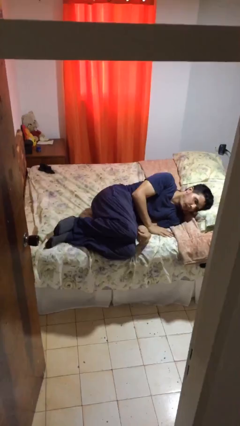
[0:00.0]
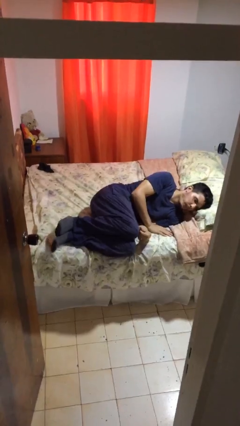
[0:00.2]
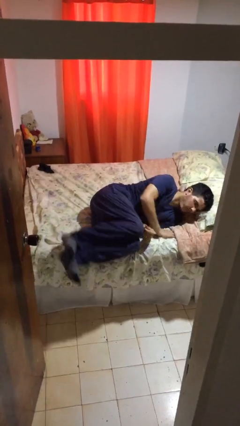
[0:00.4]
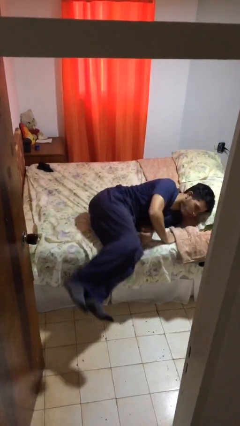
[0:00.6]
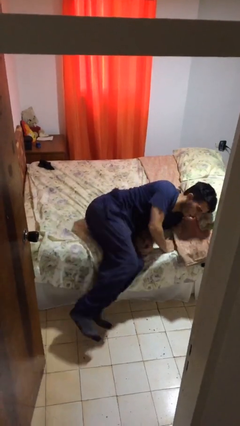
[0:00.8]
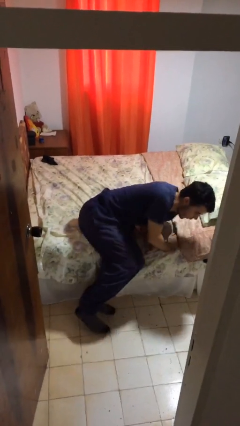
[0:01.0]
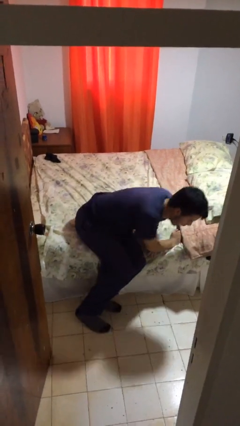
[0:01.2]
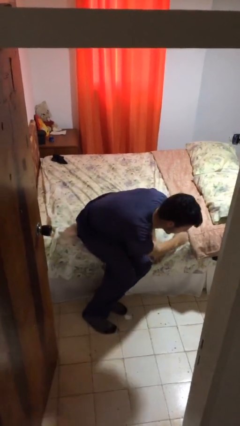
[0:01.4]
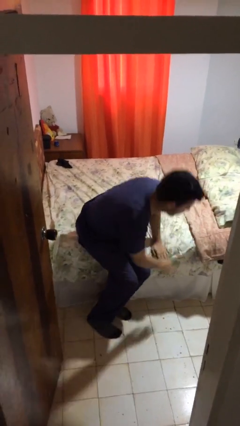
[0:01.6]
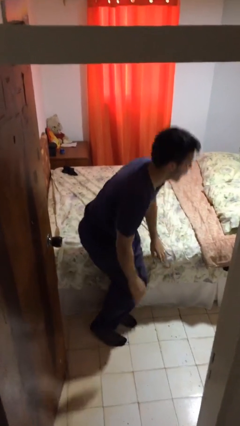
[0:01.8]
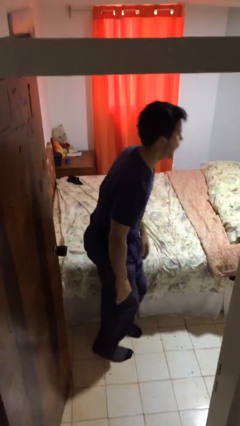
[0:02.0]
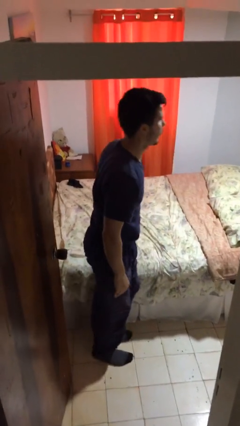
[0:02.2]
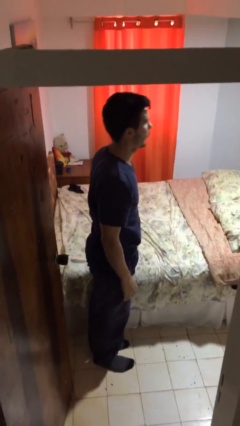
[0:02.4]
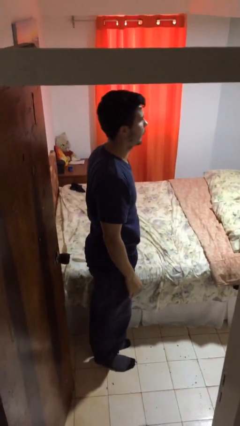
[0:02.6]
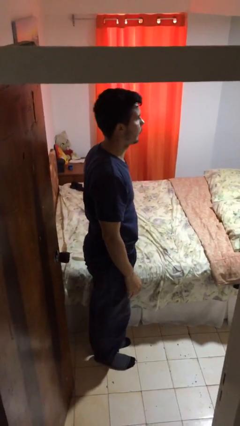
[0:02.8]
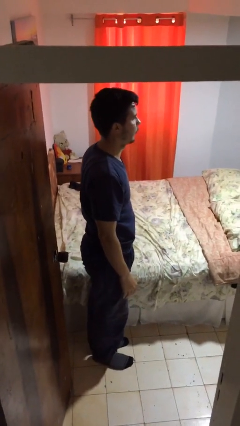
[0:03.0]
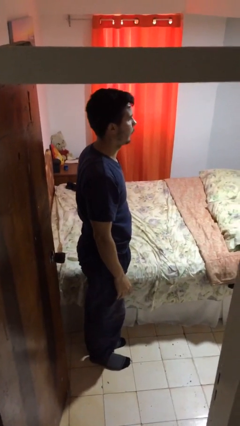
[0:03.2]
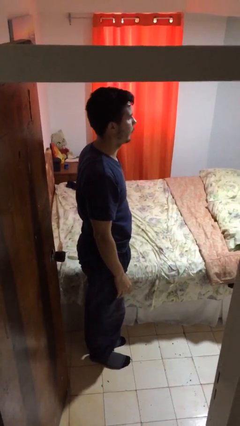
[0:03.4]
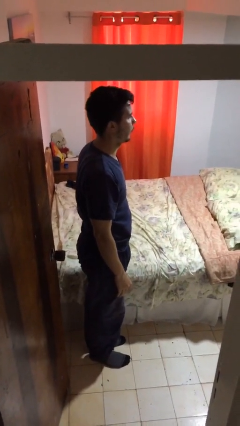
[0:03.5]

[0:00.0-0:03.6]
person stands up

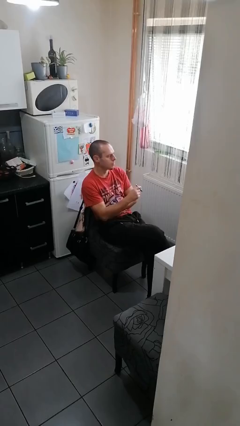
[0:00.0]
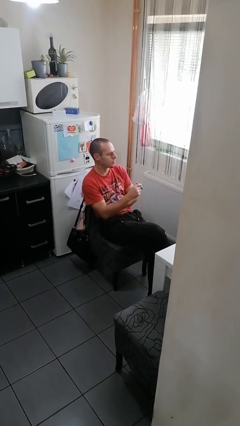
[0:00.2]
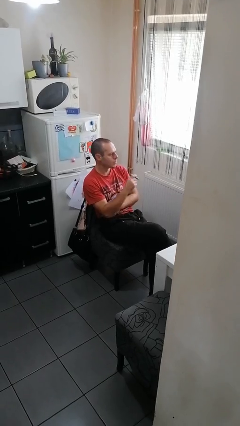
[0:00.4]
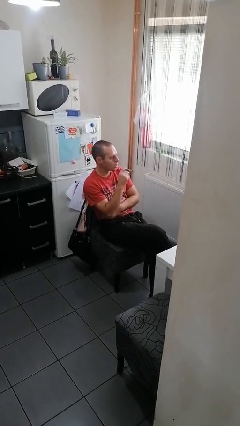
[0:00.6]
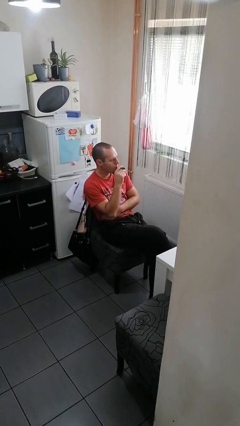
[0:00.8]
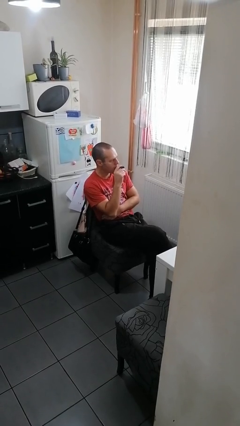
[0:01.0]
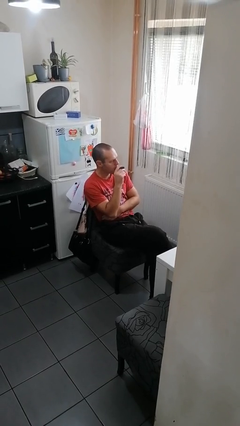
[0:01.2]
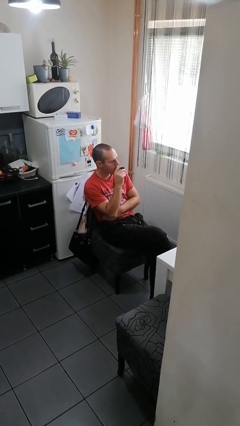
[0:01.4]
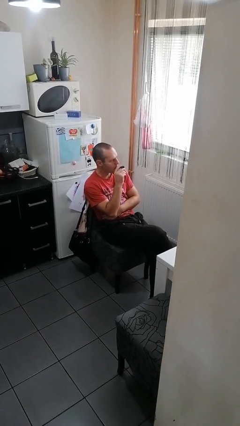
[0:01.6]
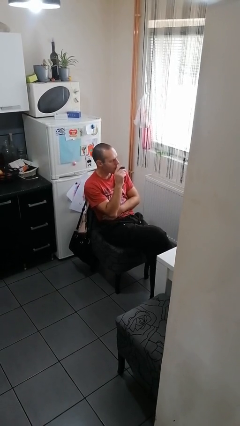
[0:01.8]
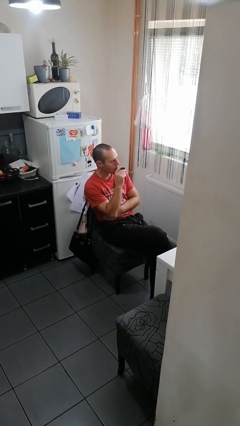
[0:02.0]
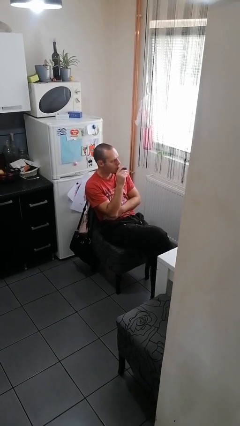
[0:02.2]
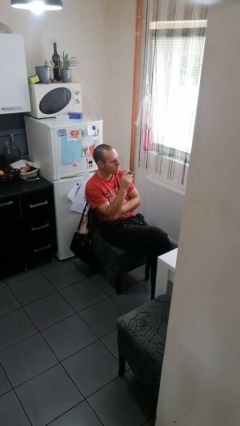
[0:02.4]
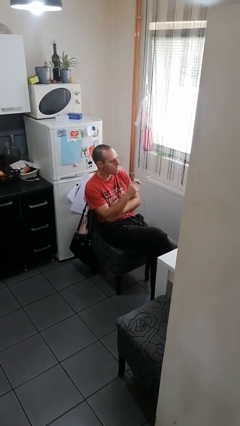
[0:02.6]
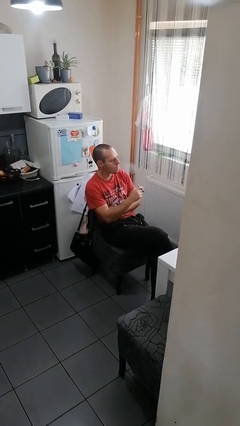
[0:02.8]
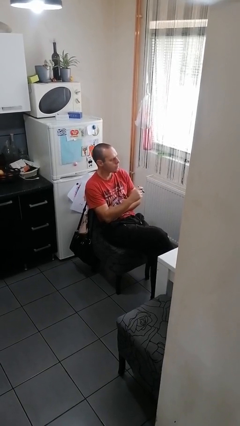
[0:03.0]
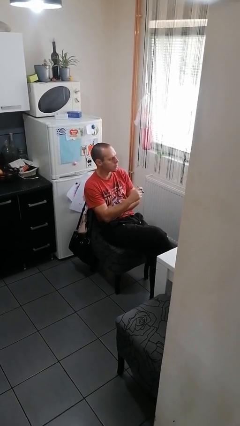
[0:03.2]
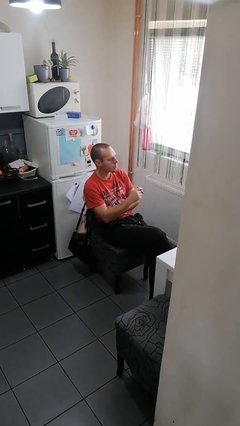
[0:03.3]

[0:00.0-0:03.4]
person vapes

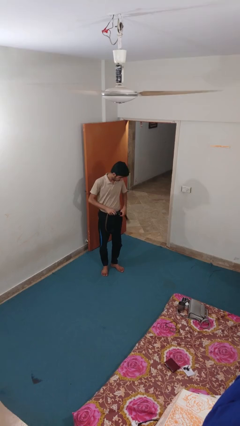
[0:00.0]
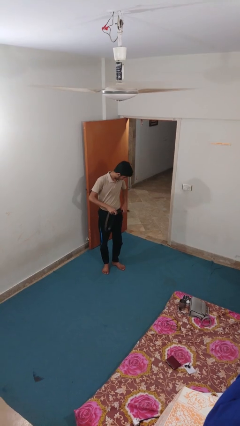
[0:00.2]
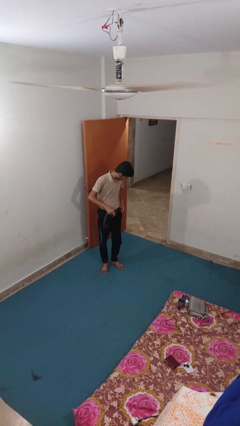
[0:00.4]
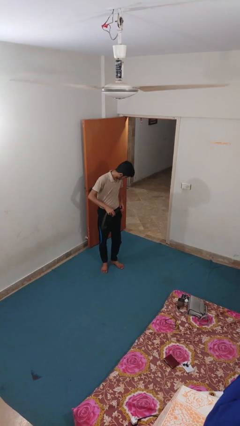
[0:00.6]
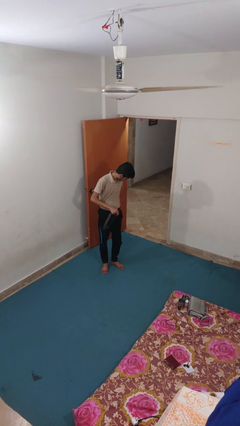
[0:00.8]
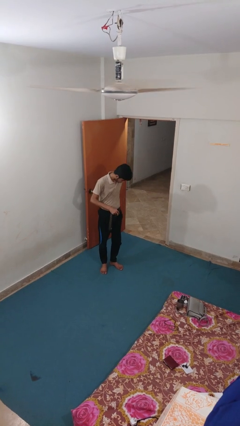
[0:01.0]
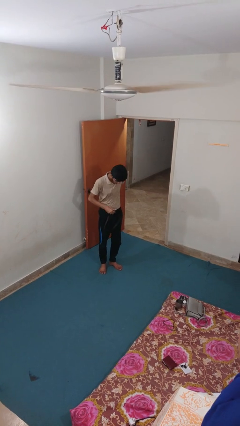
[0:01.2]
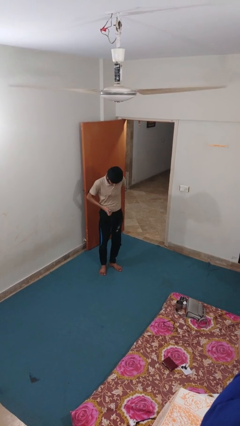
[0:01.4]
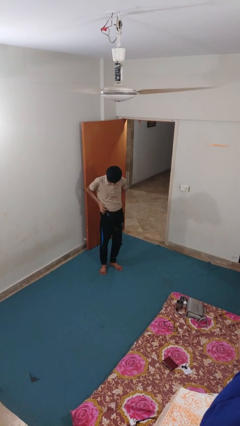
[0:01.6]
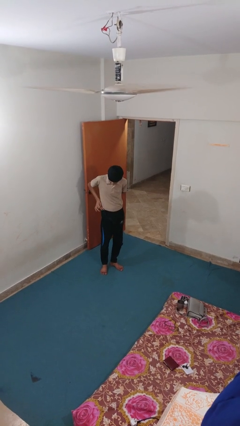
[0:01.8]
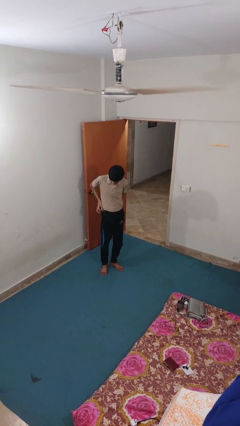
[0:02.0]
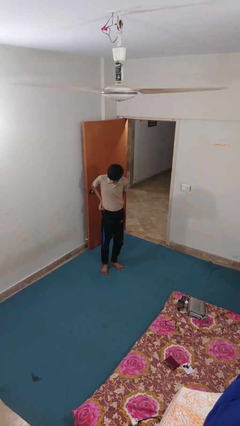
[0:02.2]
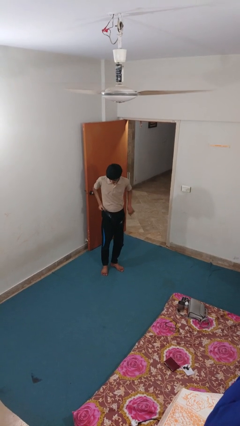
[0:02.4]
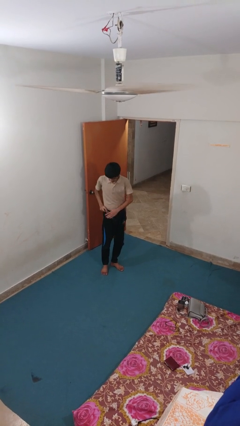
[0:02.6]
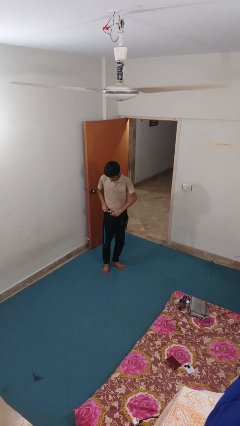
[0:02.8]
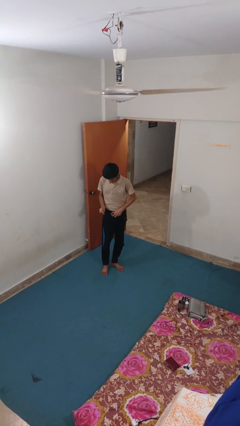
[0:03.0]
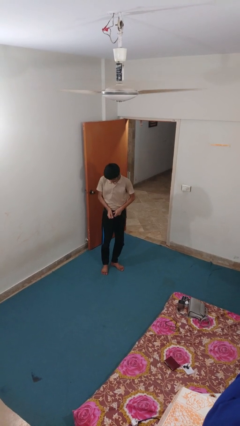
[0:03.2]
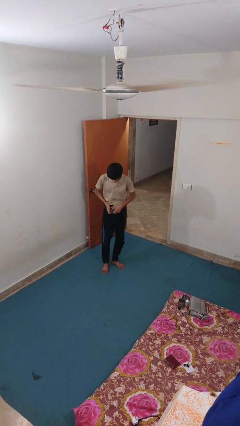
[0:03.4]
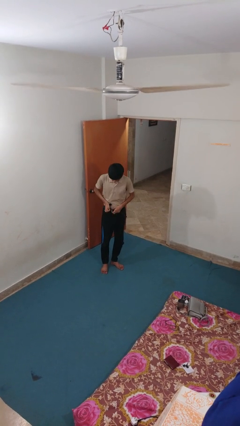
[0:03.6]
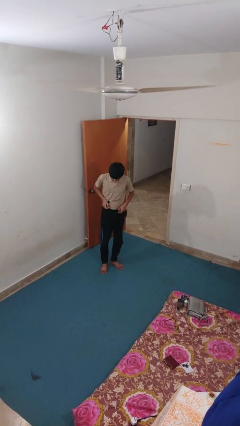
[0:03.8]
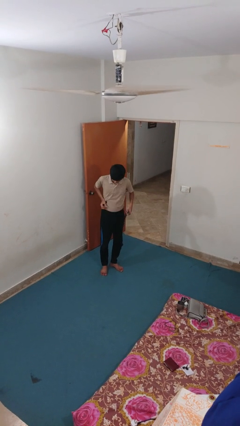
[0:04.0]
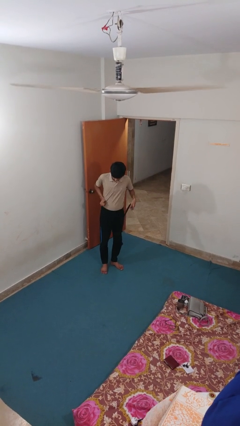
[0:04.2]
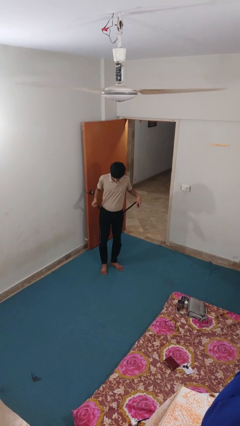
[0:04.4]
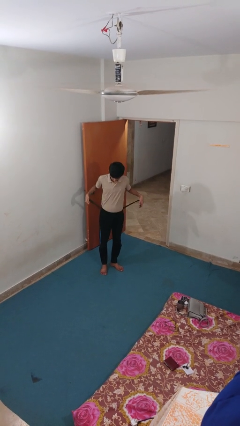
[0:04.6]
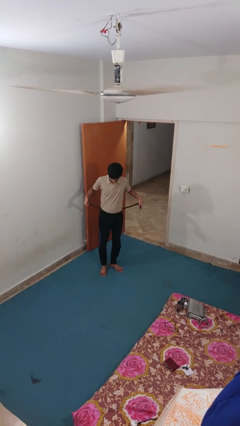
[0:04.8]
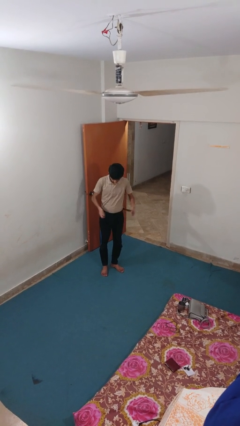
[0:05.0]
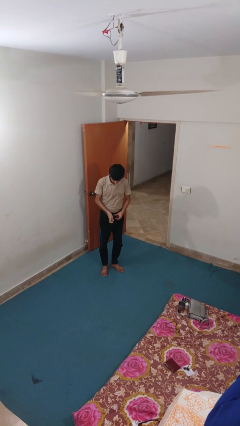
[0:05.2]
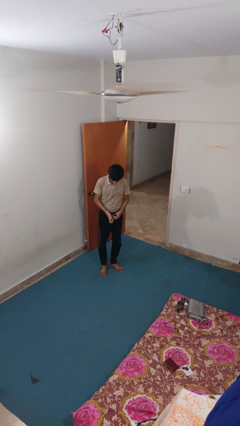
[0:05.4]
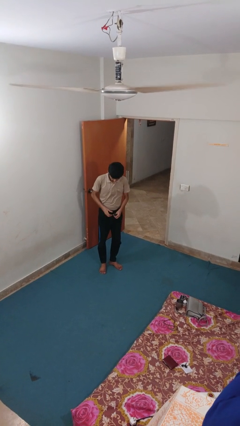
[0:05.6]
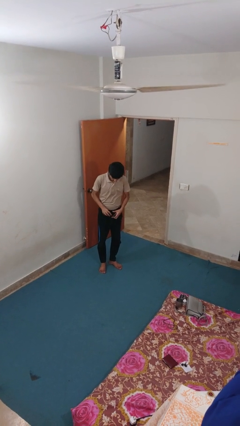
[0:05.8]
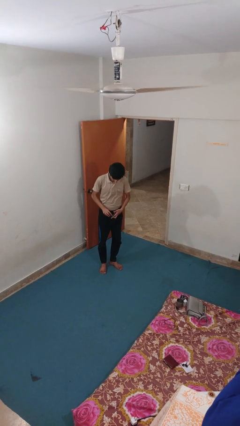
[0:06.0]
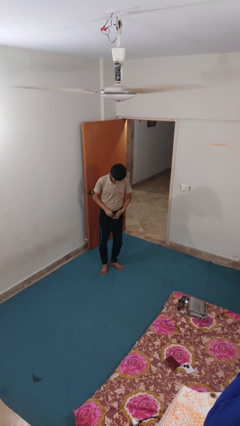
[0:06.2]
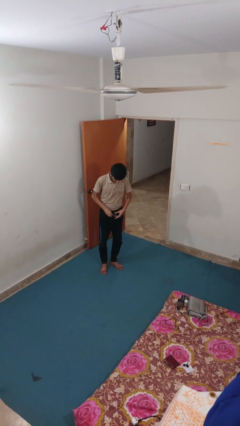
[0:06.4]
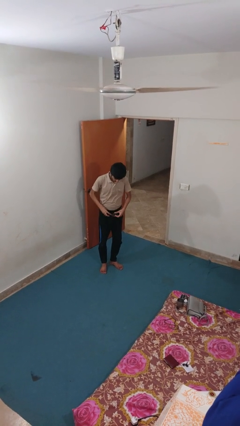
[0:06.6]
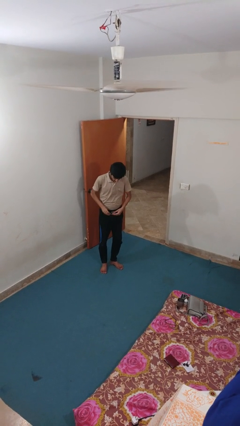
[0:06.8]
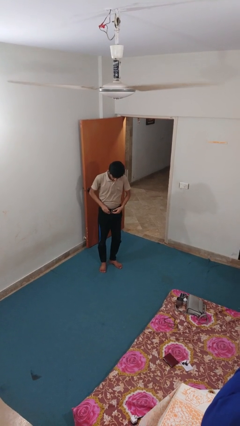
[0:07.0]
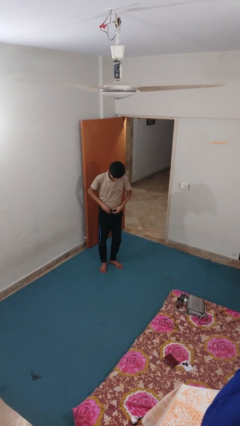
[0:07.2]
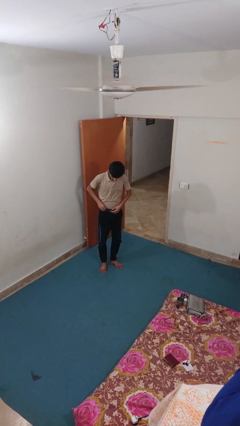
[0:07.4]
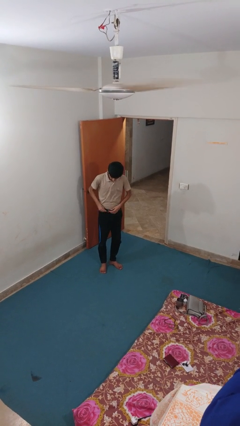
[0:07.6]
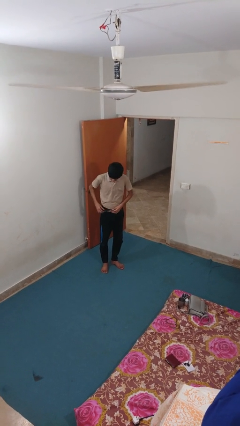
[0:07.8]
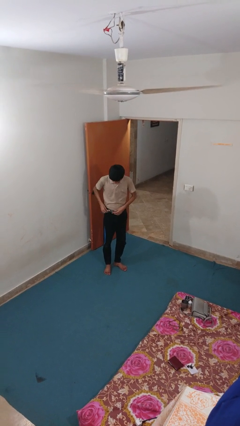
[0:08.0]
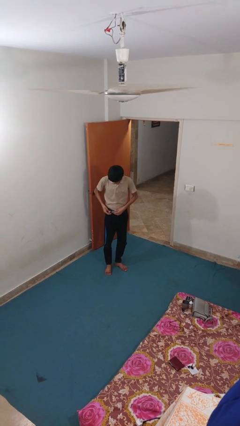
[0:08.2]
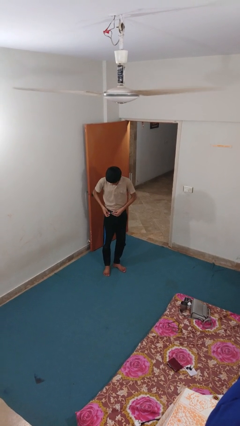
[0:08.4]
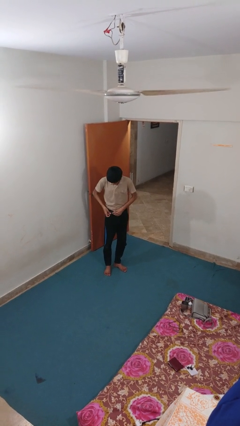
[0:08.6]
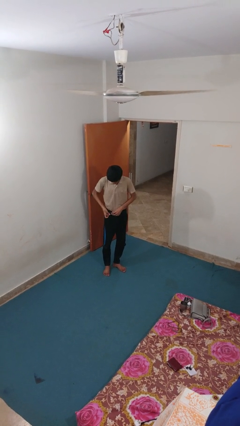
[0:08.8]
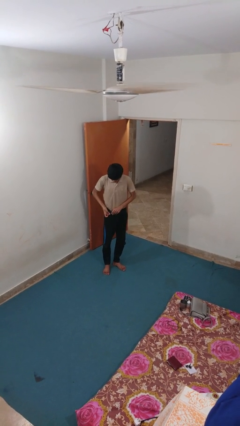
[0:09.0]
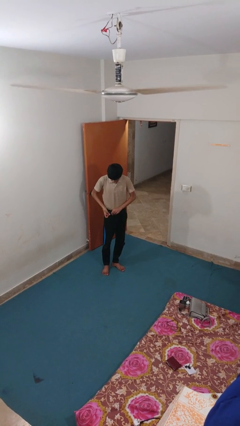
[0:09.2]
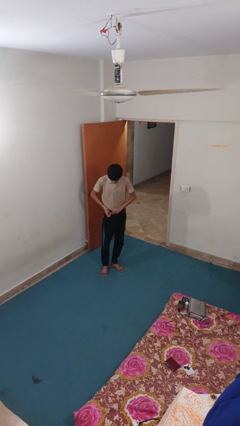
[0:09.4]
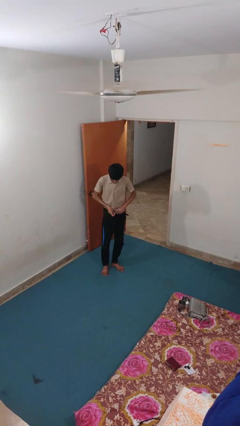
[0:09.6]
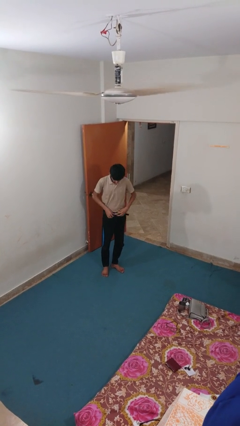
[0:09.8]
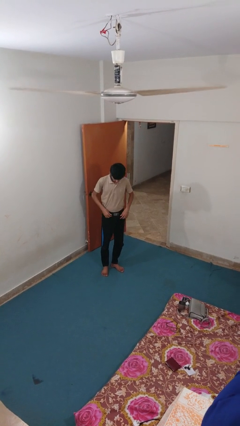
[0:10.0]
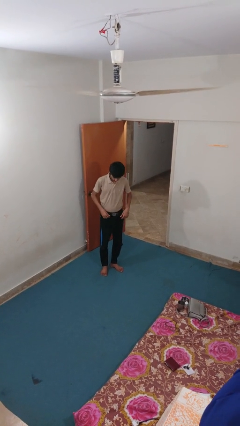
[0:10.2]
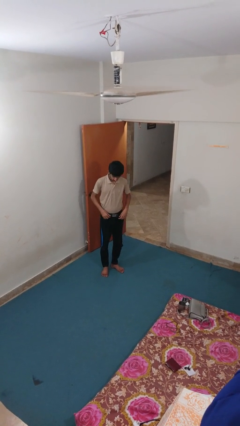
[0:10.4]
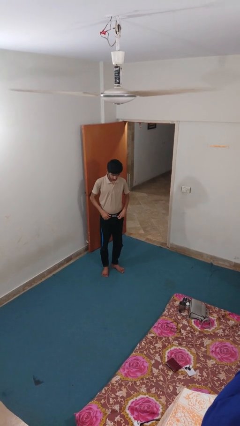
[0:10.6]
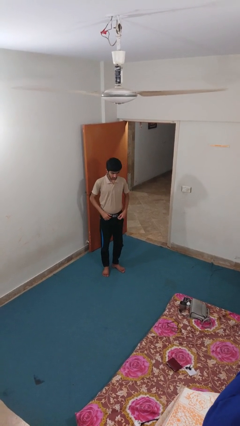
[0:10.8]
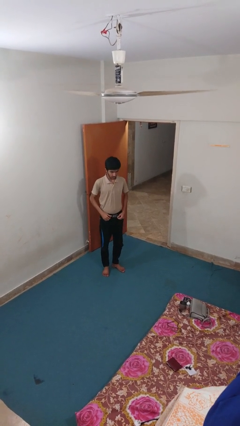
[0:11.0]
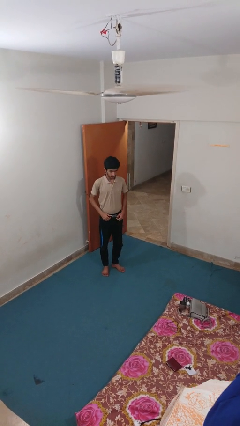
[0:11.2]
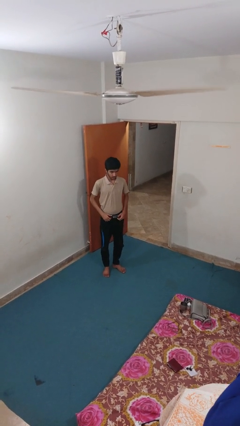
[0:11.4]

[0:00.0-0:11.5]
person puts on belt
